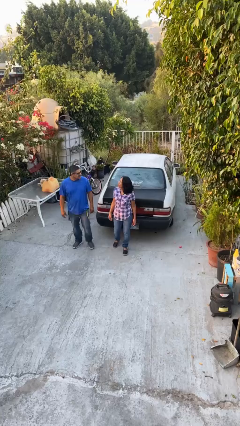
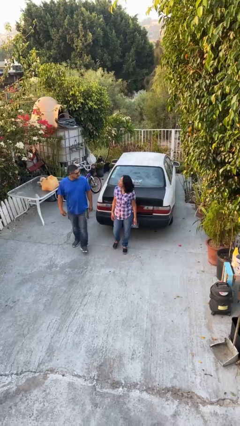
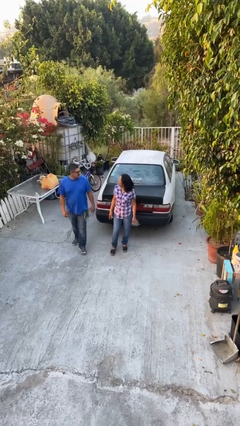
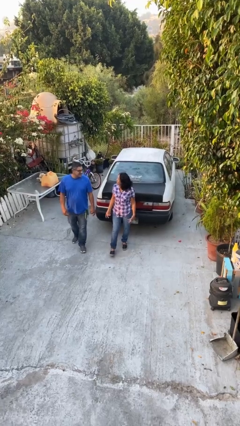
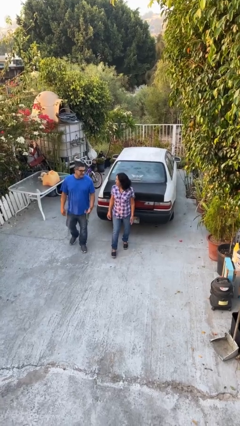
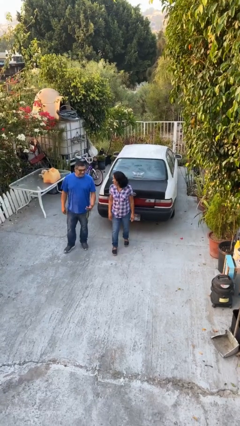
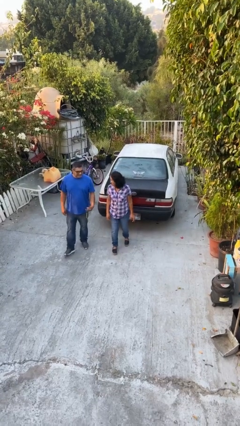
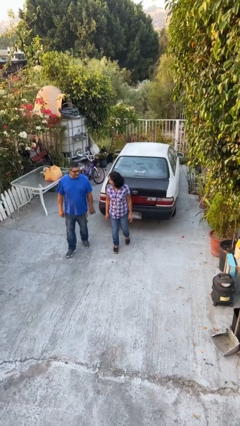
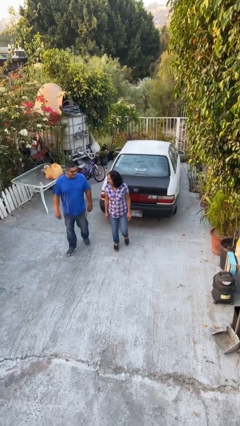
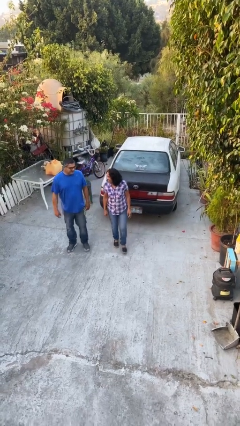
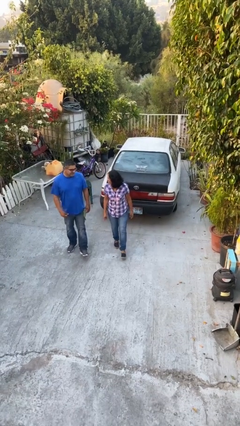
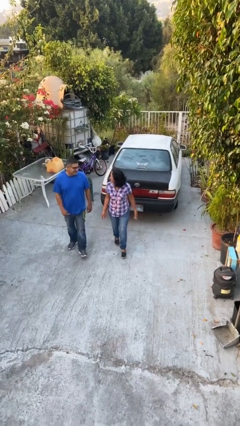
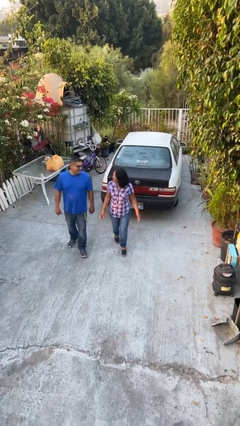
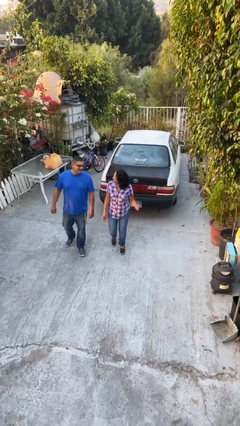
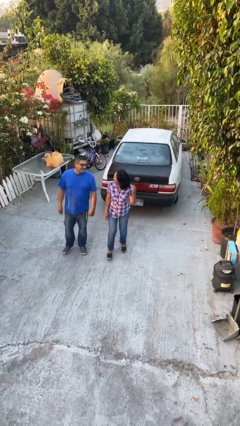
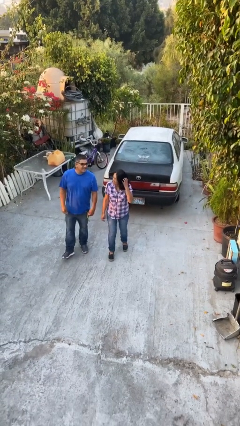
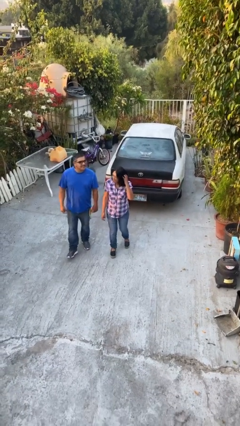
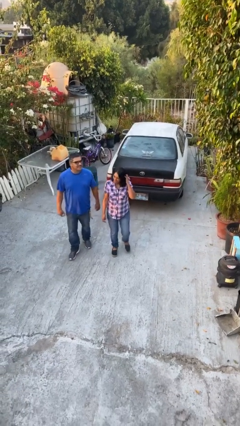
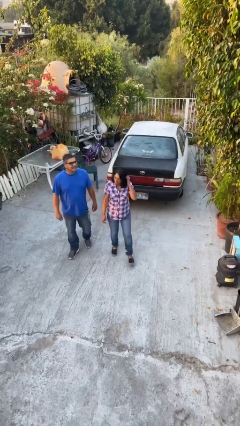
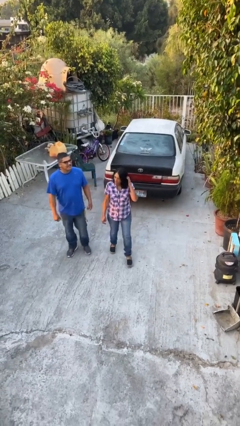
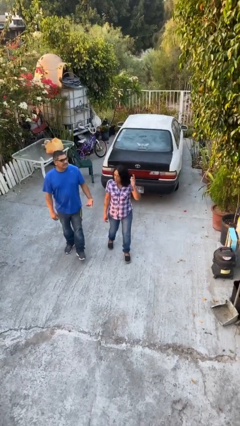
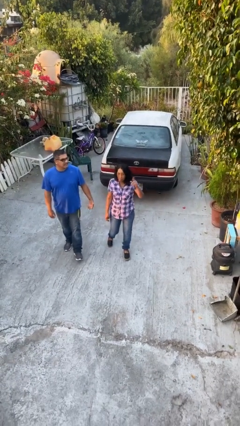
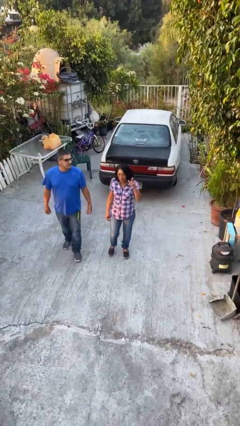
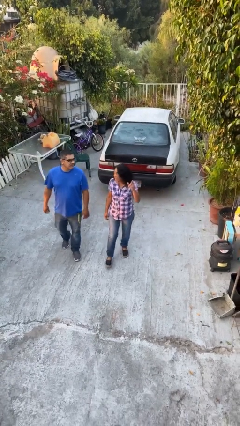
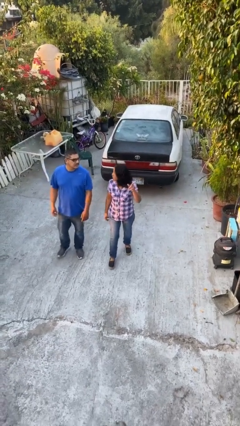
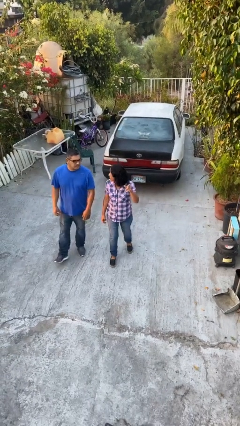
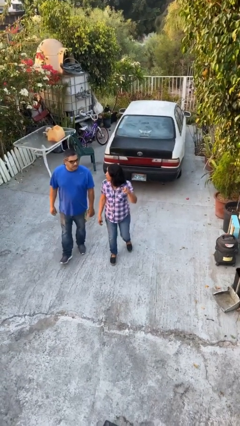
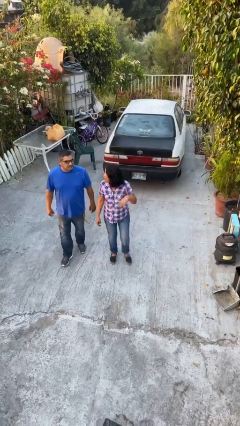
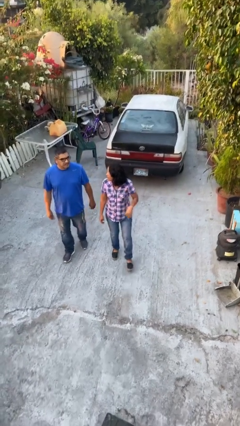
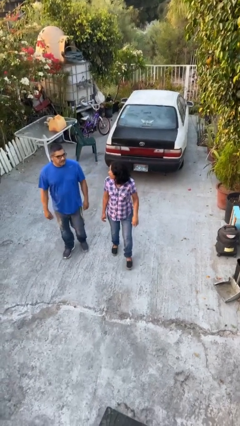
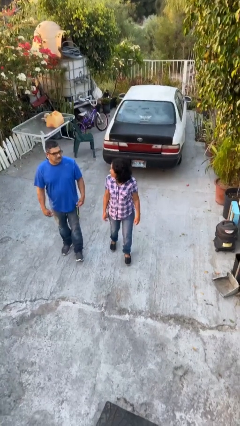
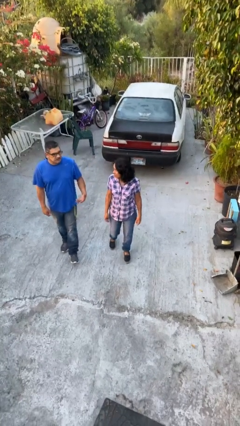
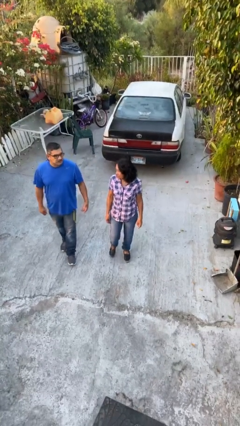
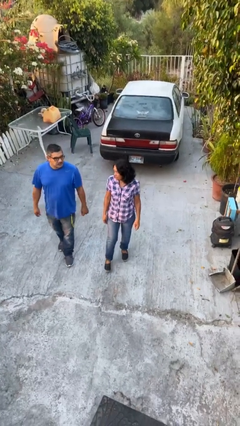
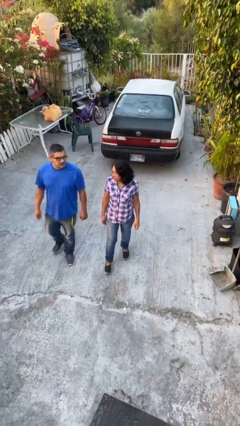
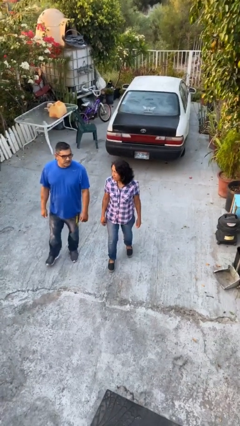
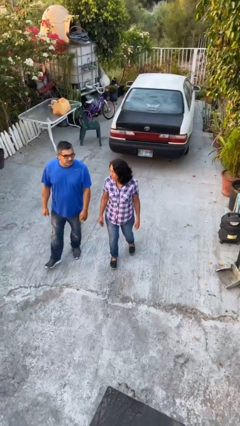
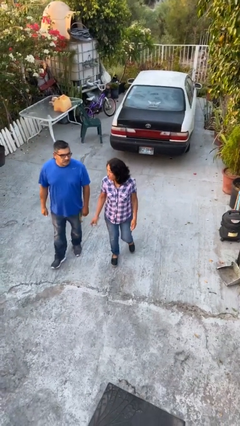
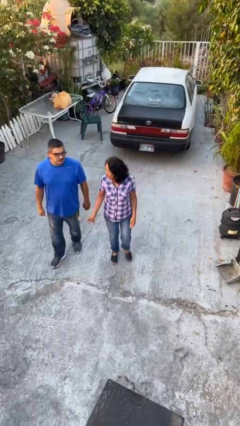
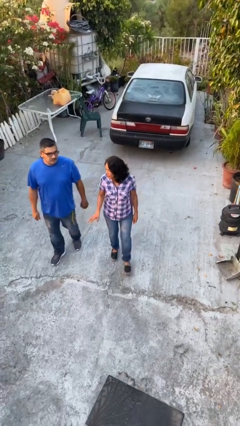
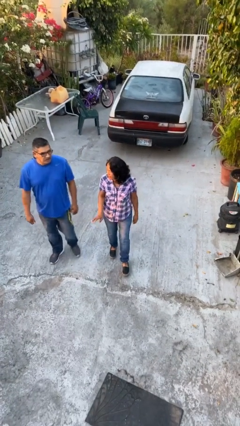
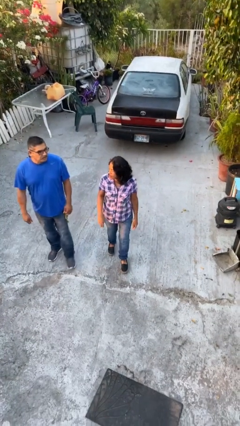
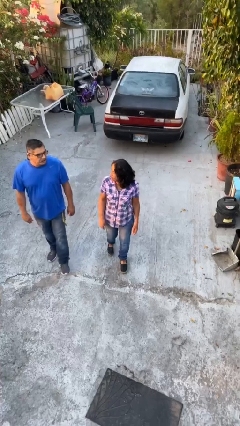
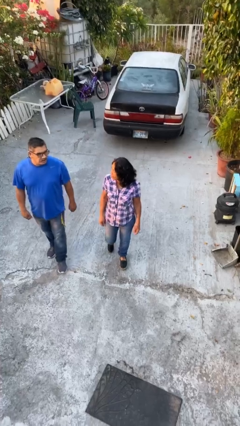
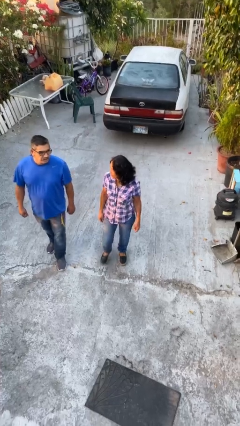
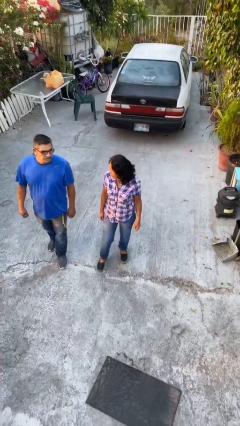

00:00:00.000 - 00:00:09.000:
person talks to person

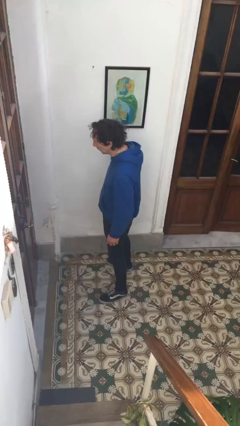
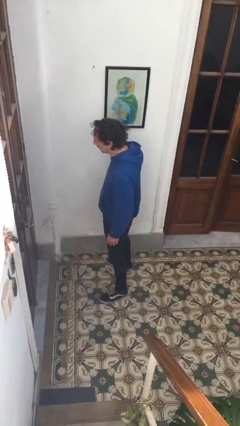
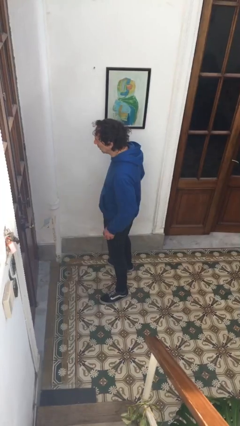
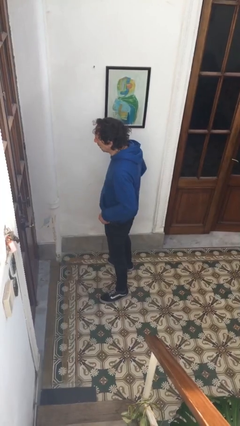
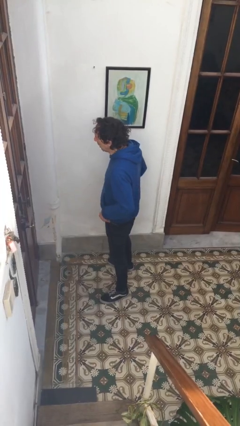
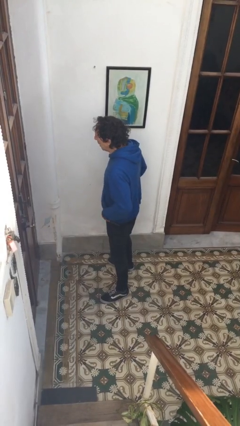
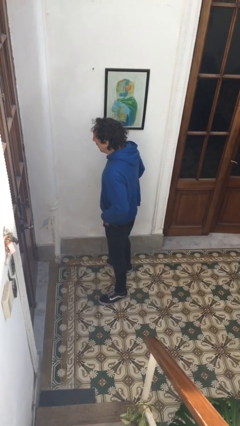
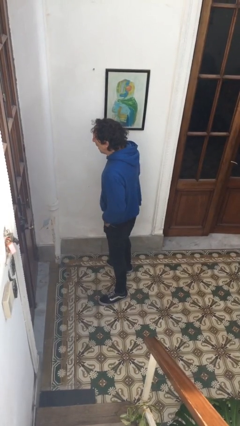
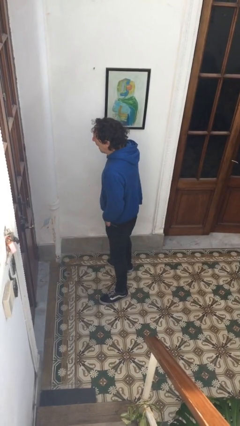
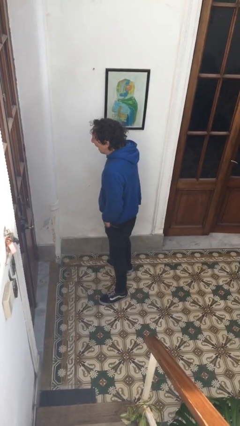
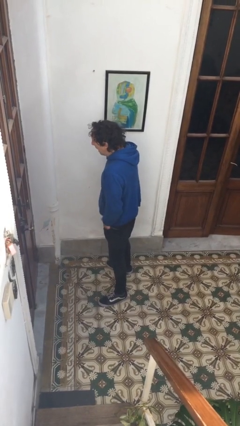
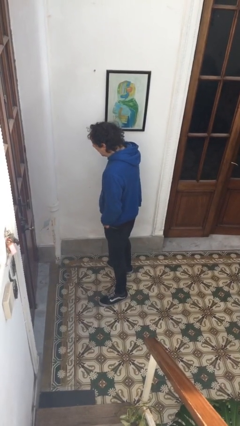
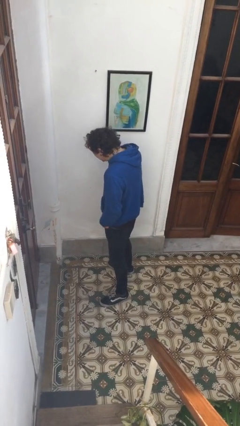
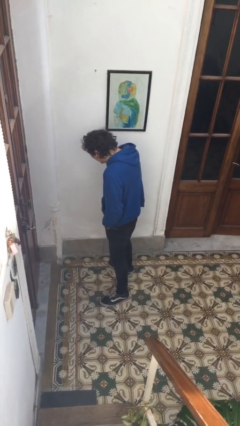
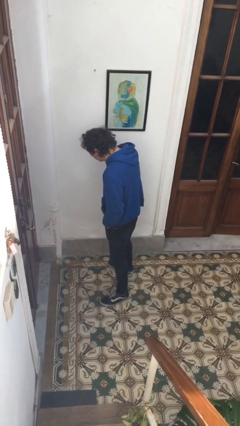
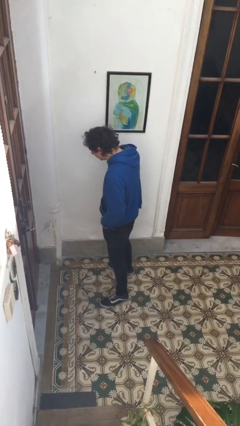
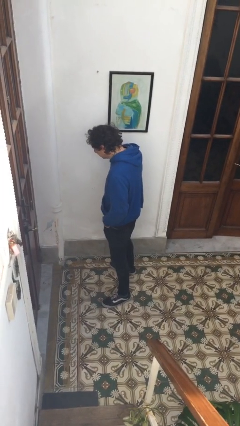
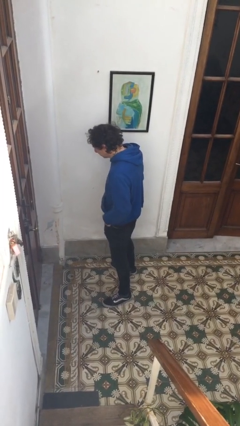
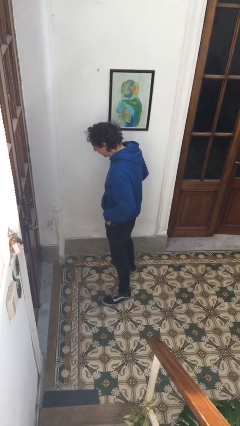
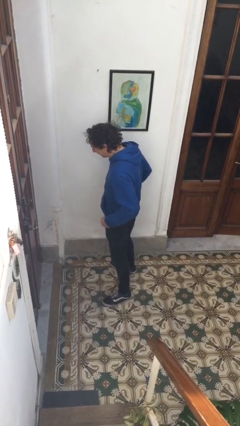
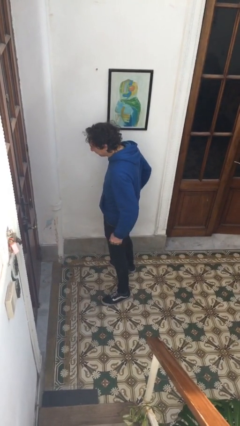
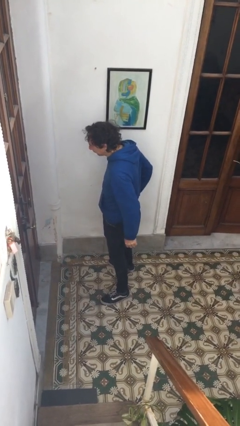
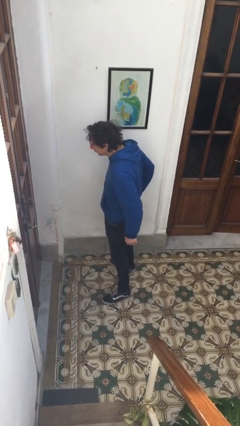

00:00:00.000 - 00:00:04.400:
person puts hands in back pockets

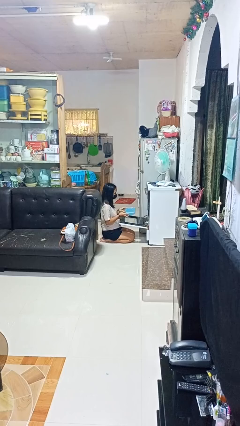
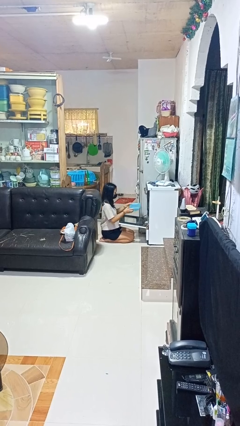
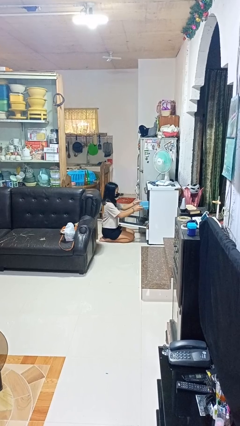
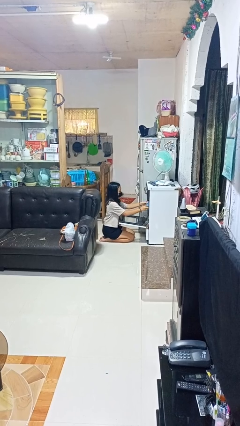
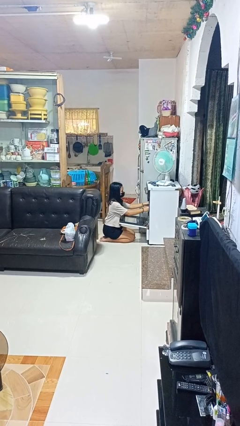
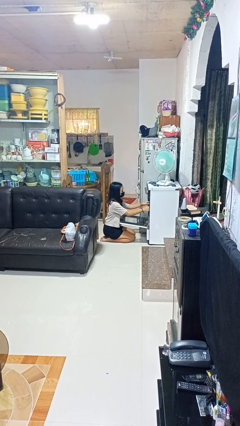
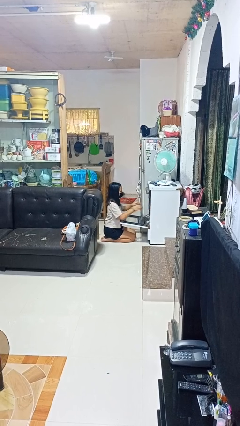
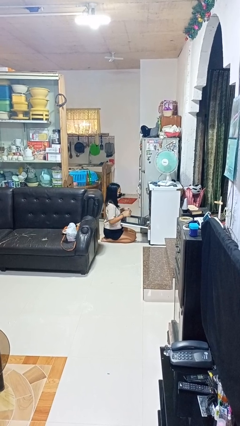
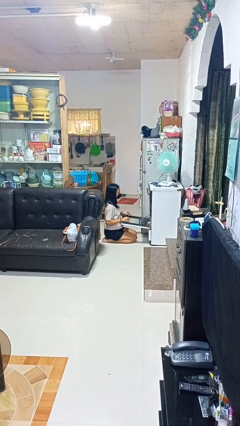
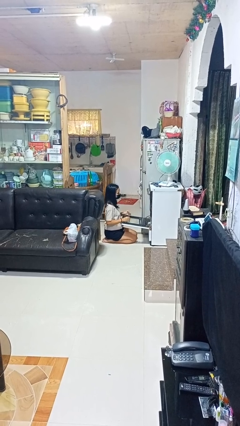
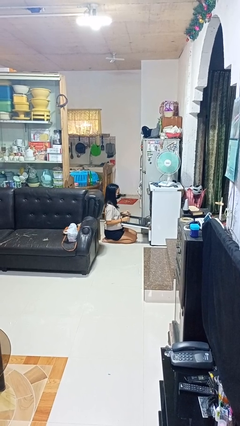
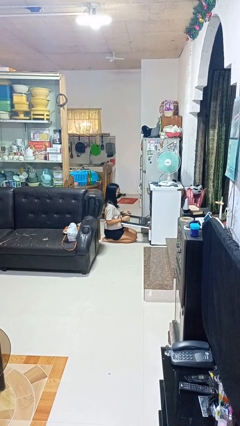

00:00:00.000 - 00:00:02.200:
person puts object into oven

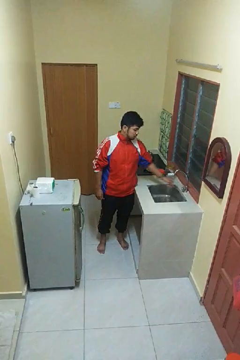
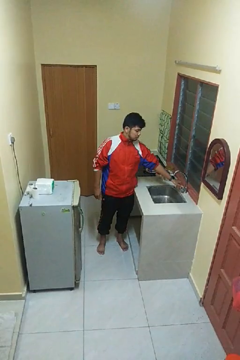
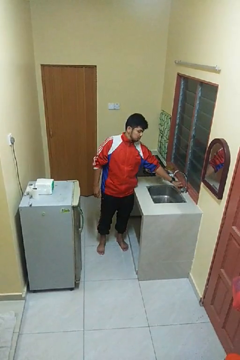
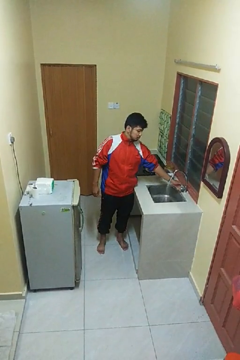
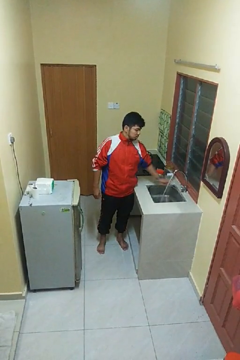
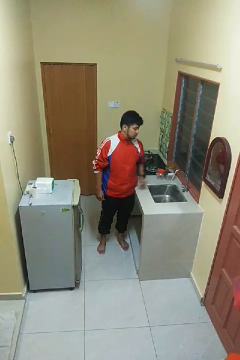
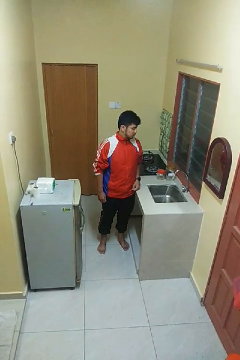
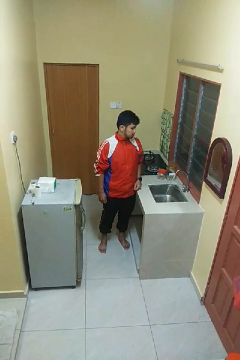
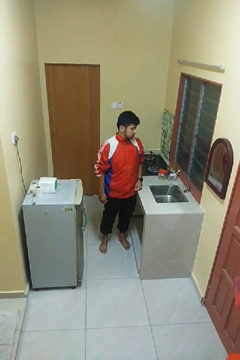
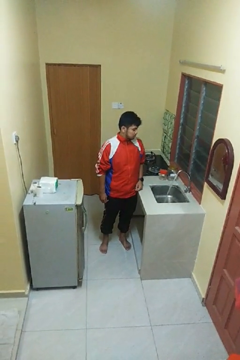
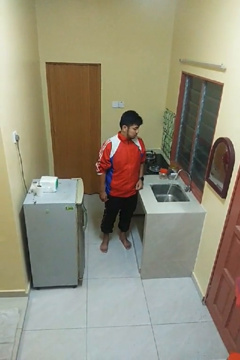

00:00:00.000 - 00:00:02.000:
person turns on faucet

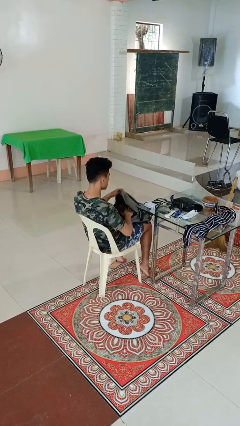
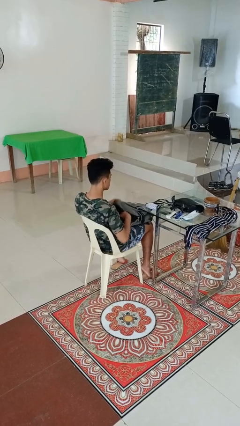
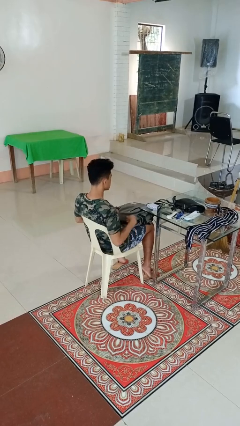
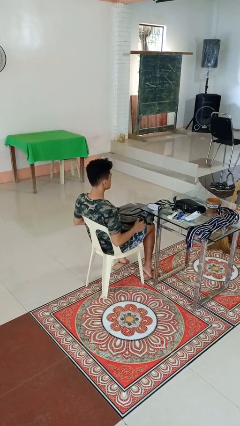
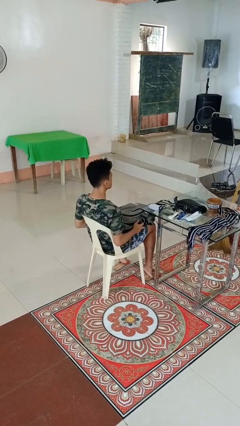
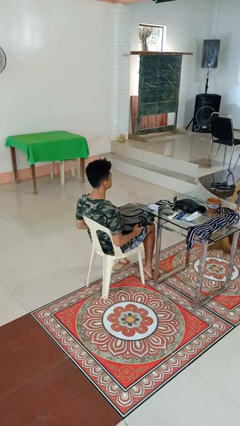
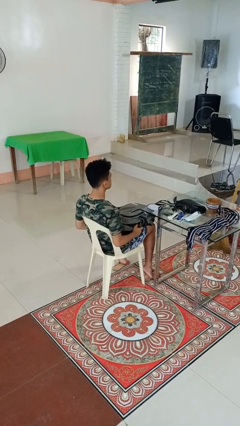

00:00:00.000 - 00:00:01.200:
person puts object into backpack
